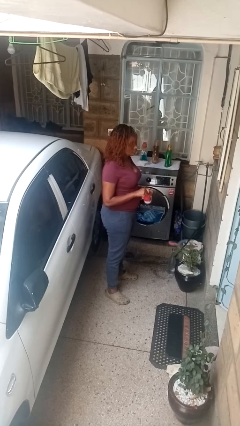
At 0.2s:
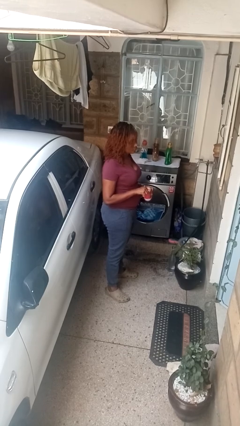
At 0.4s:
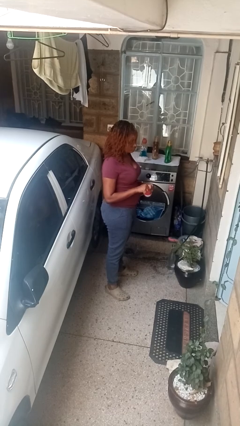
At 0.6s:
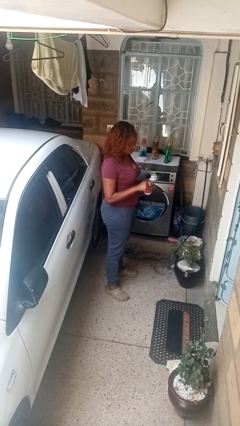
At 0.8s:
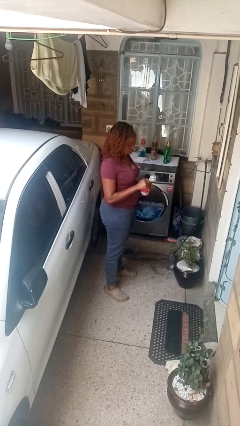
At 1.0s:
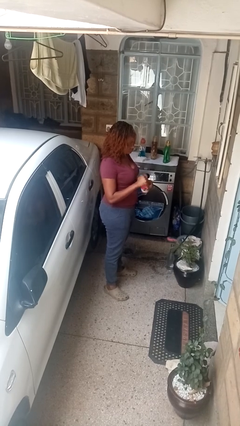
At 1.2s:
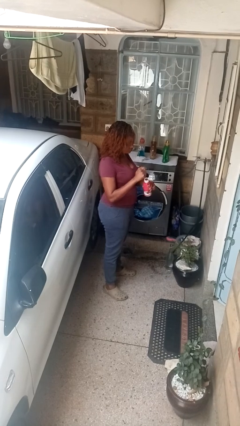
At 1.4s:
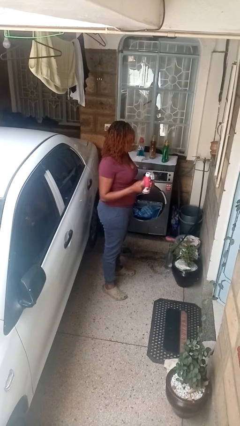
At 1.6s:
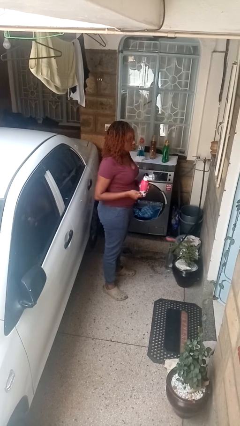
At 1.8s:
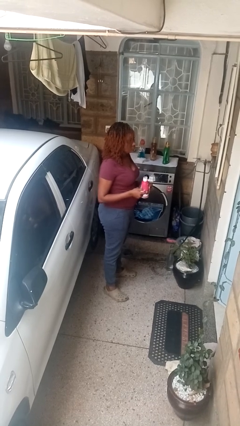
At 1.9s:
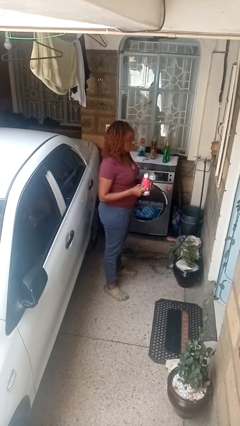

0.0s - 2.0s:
person opens beverage can

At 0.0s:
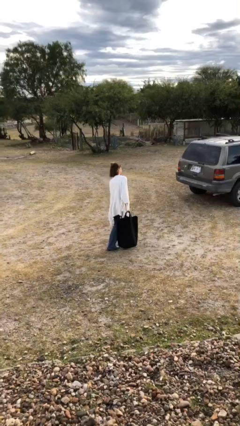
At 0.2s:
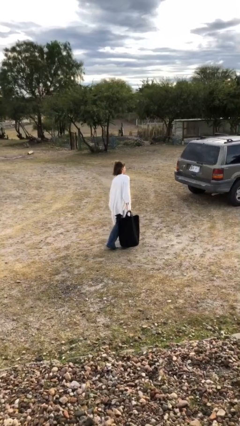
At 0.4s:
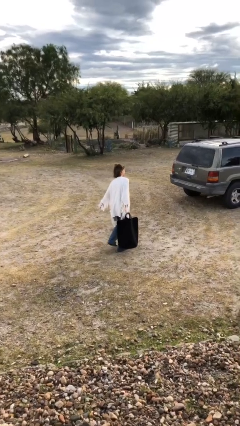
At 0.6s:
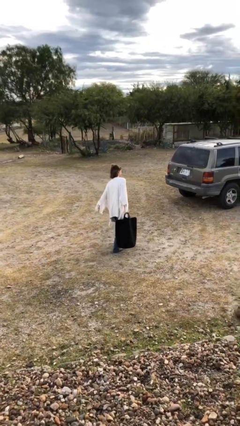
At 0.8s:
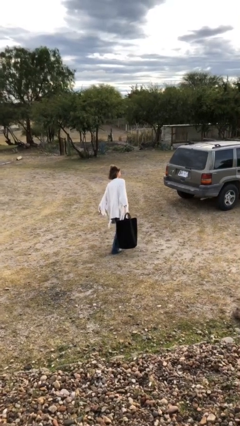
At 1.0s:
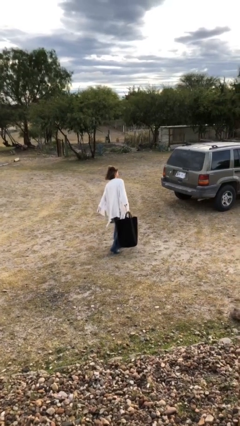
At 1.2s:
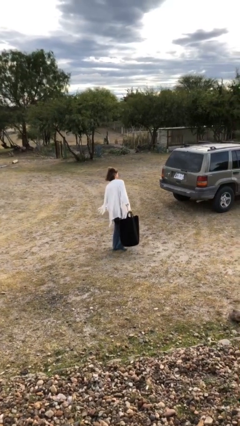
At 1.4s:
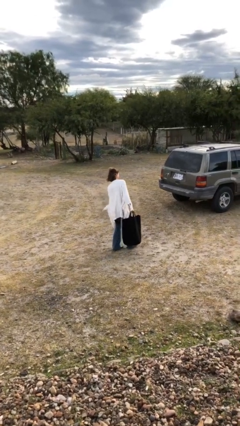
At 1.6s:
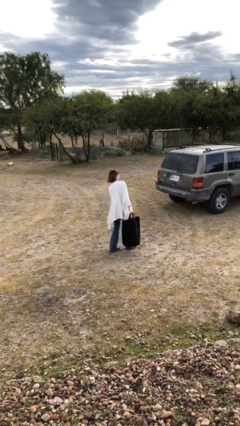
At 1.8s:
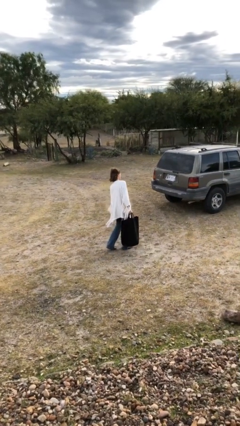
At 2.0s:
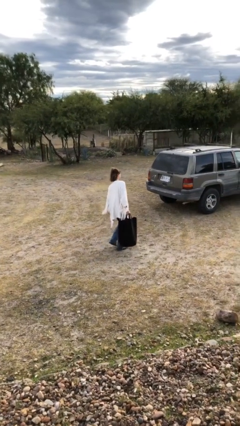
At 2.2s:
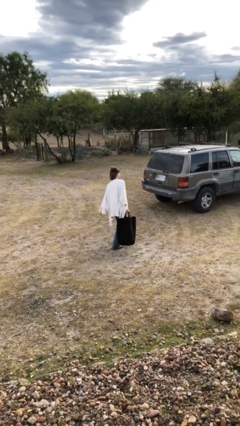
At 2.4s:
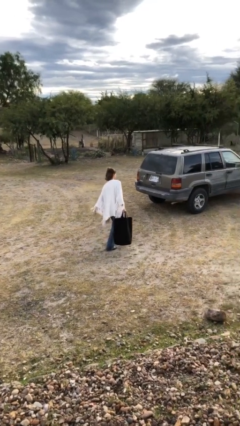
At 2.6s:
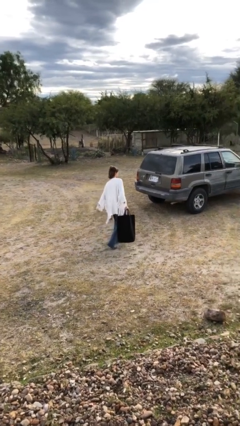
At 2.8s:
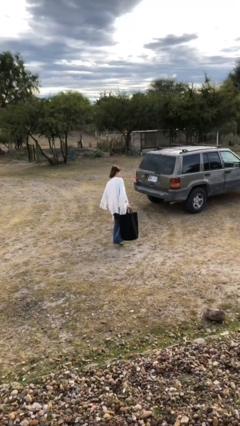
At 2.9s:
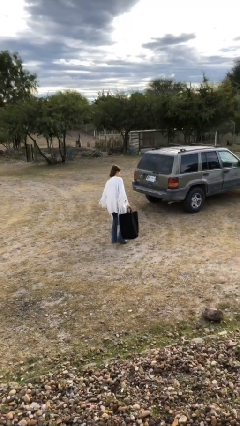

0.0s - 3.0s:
person carries heavy object

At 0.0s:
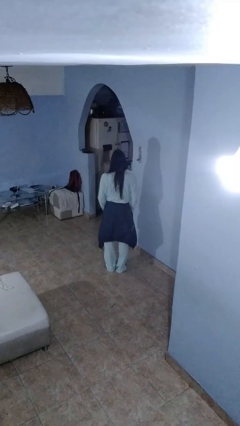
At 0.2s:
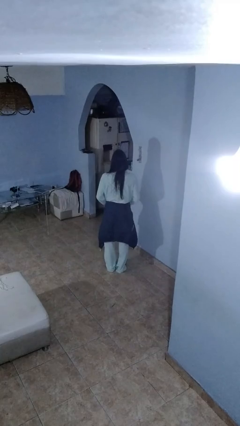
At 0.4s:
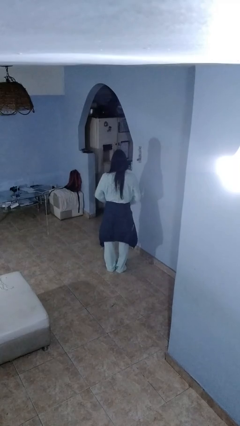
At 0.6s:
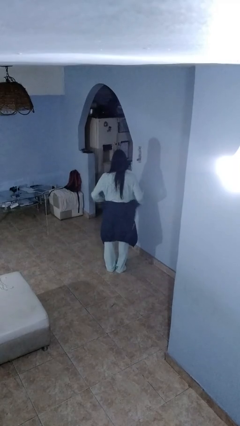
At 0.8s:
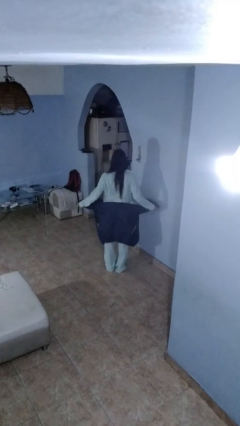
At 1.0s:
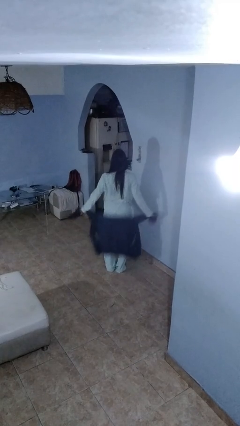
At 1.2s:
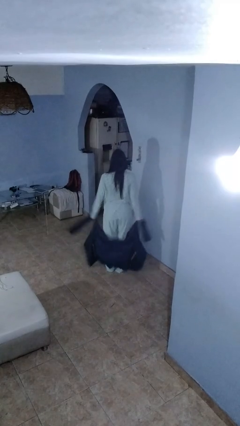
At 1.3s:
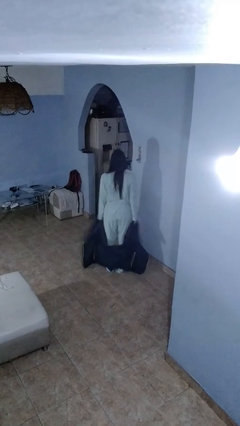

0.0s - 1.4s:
person unties jacket around waist

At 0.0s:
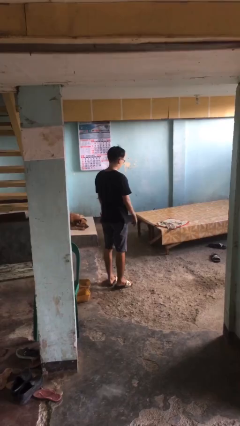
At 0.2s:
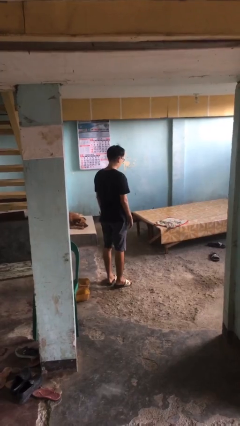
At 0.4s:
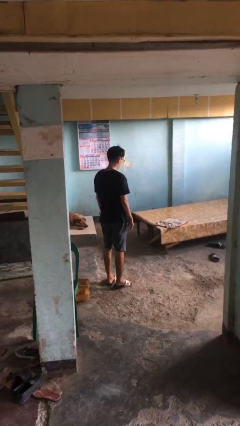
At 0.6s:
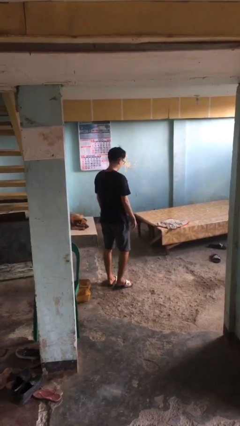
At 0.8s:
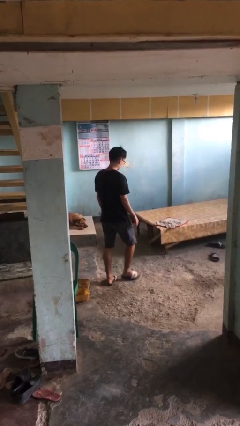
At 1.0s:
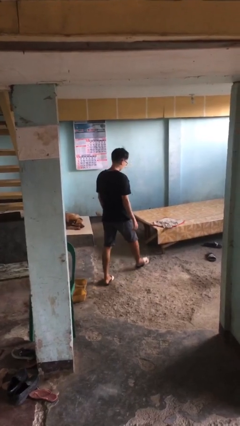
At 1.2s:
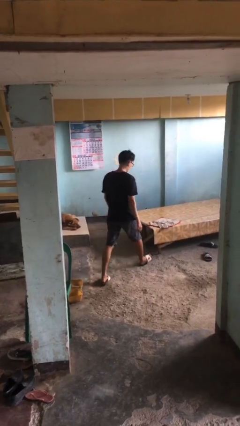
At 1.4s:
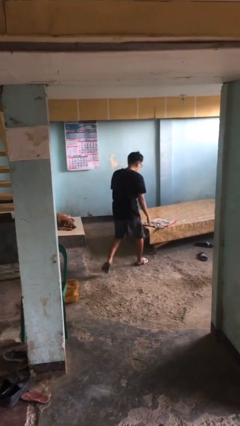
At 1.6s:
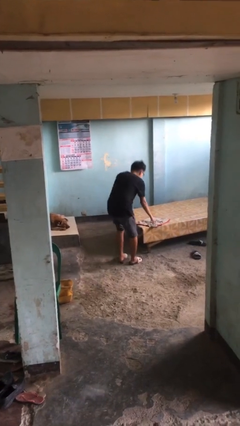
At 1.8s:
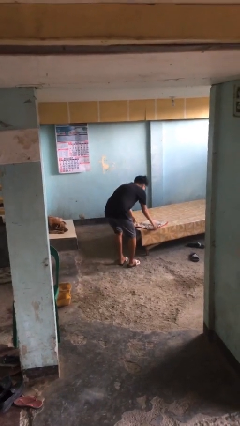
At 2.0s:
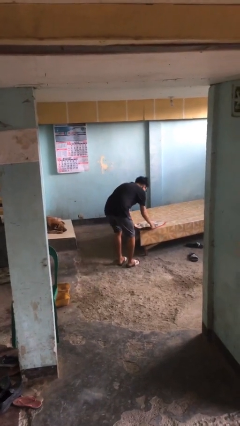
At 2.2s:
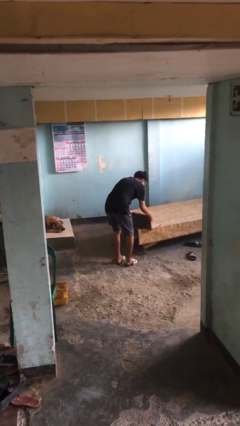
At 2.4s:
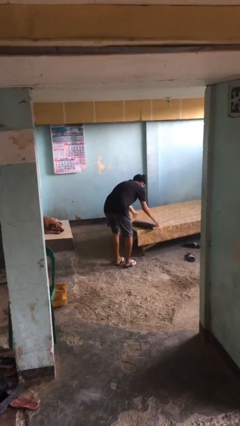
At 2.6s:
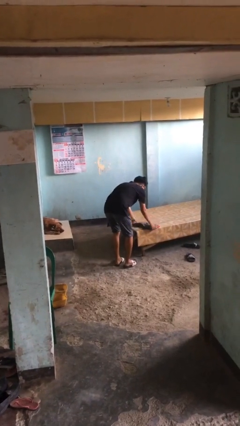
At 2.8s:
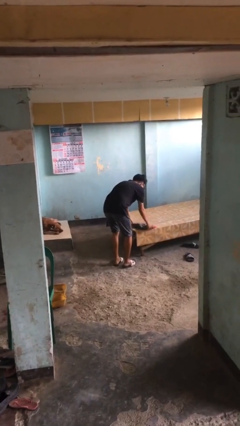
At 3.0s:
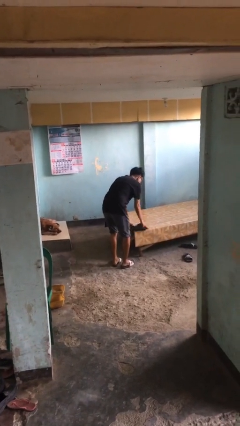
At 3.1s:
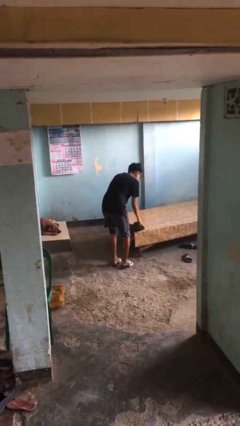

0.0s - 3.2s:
person picks up object from bed

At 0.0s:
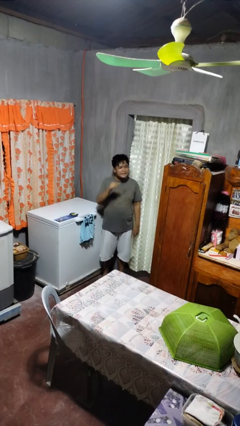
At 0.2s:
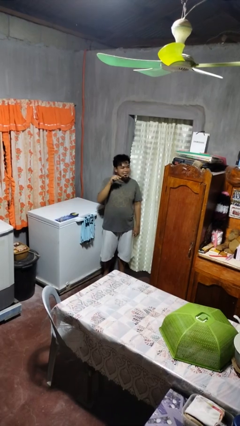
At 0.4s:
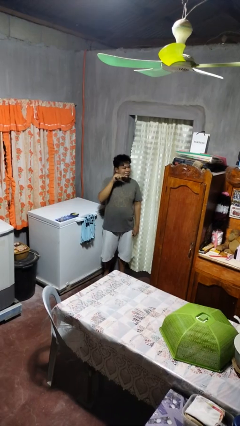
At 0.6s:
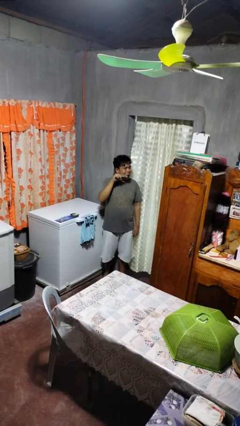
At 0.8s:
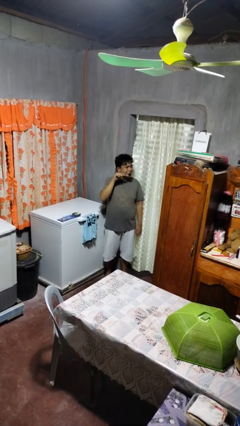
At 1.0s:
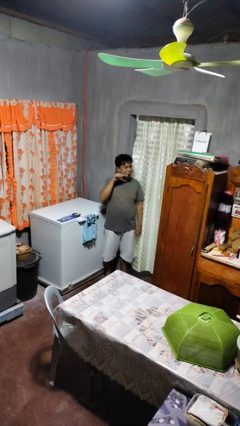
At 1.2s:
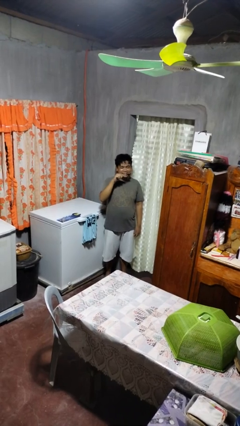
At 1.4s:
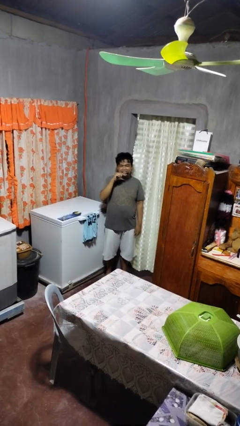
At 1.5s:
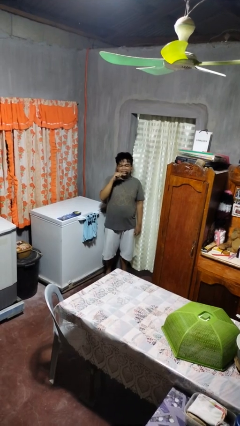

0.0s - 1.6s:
person brushes teeth

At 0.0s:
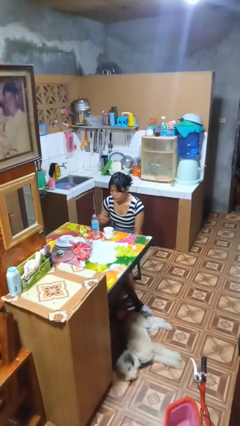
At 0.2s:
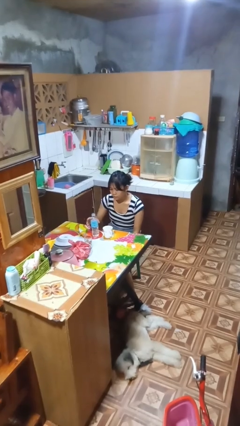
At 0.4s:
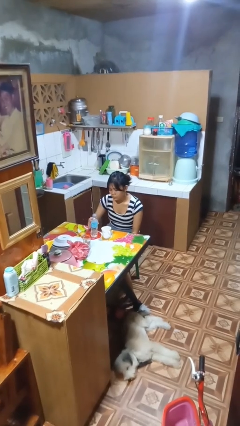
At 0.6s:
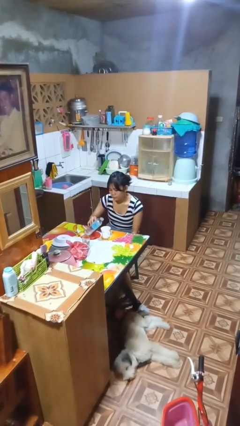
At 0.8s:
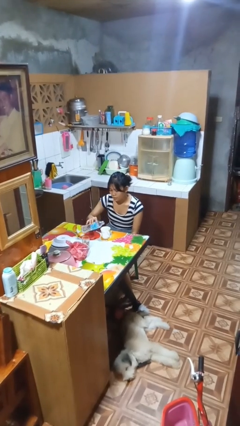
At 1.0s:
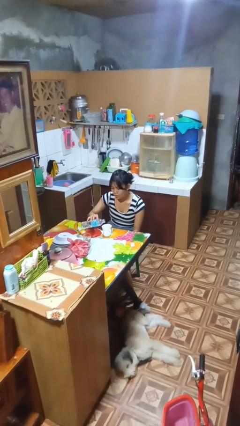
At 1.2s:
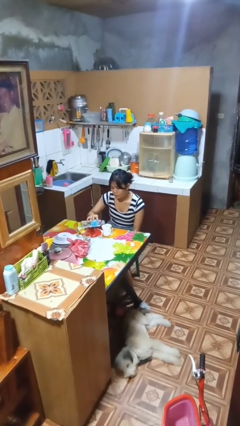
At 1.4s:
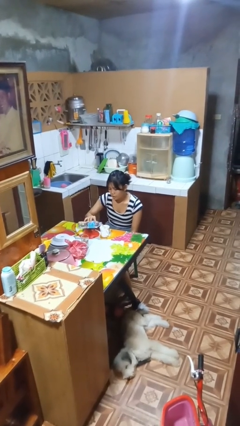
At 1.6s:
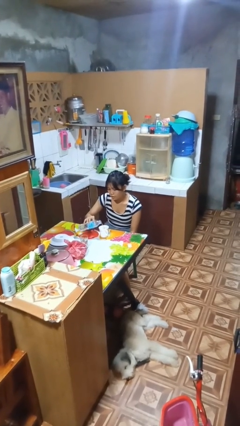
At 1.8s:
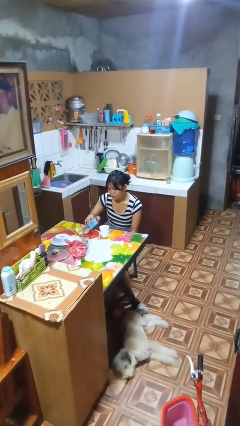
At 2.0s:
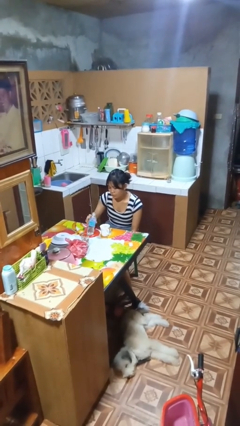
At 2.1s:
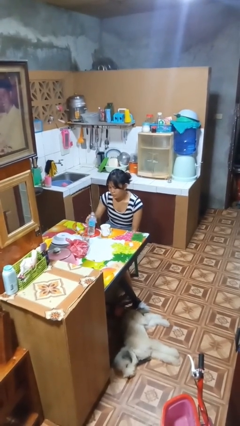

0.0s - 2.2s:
person pours liquid into cup

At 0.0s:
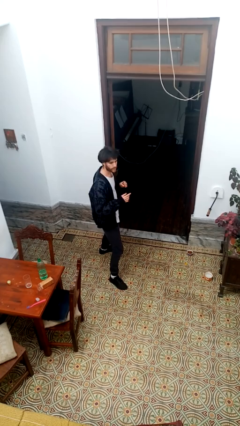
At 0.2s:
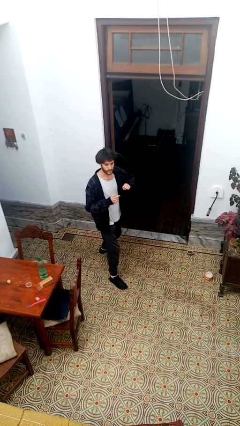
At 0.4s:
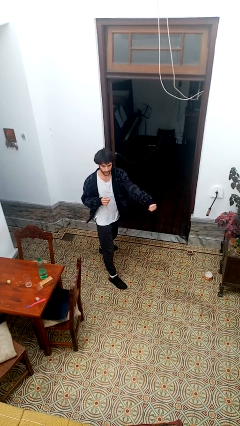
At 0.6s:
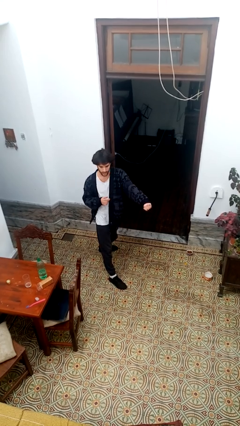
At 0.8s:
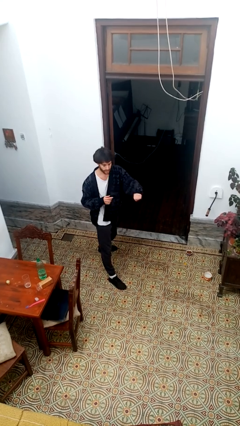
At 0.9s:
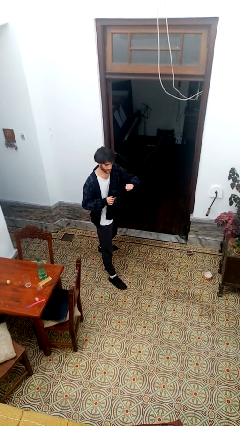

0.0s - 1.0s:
person karate chop

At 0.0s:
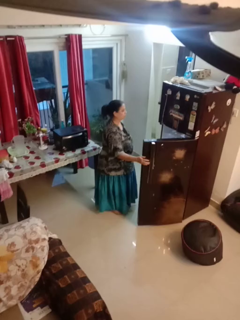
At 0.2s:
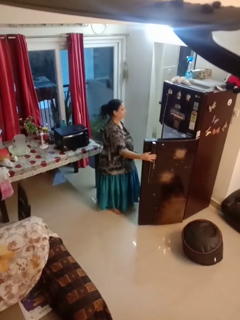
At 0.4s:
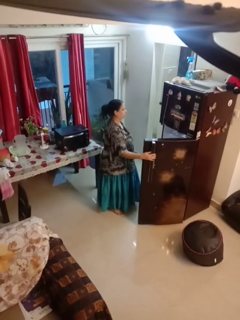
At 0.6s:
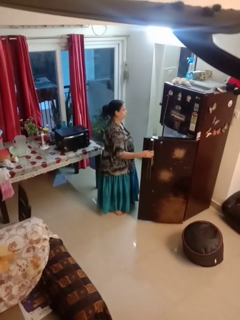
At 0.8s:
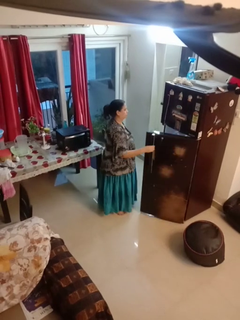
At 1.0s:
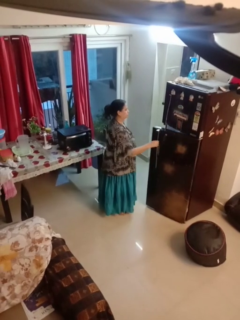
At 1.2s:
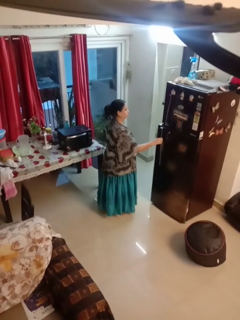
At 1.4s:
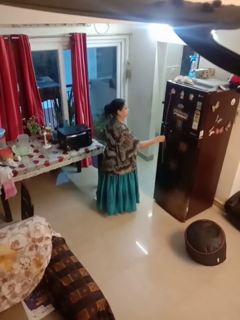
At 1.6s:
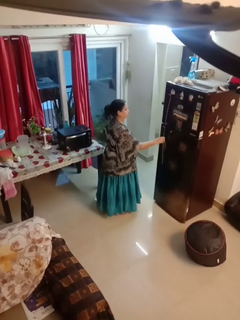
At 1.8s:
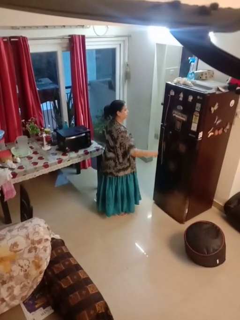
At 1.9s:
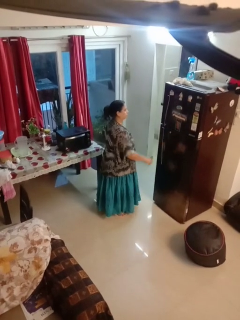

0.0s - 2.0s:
person closes refrigerator

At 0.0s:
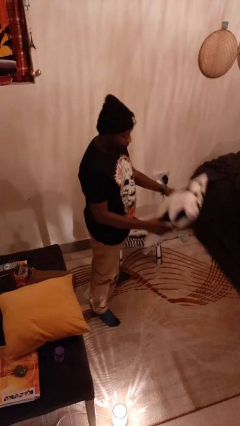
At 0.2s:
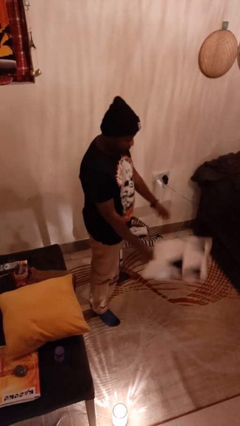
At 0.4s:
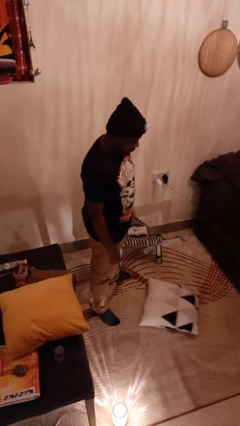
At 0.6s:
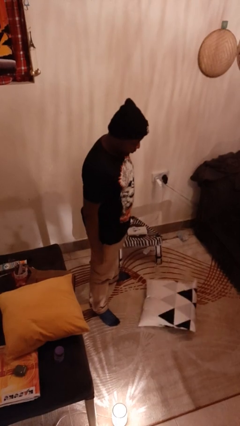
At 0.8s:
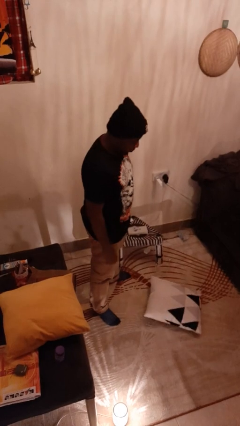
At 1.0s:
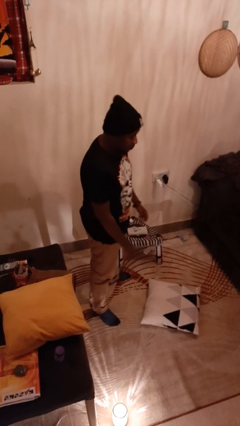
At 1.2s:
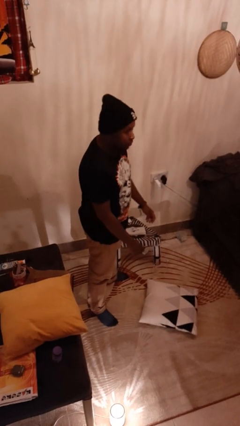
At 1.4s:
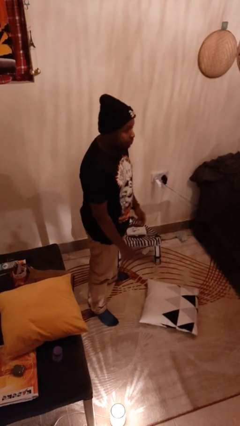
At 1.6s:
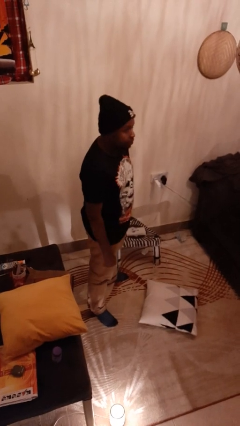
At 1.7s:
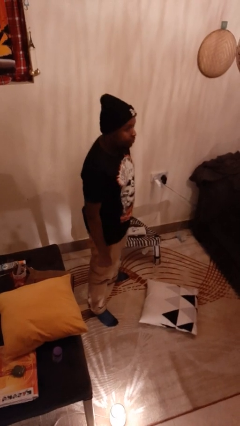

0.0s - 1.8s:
person drops object
